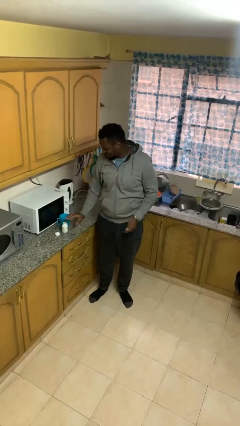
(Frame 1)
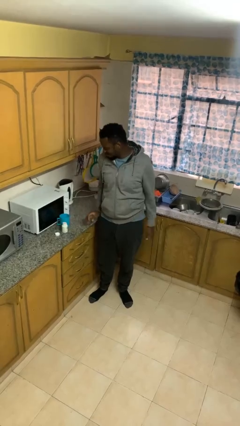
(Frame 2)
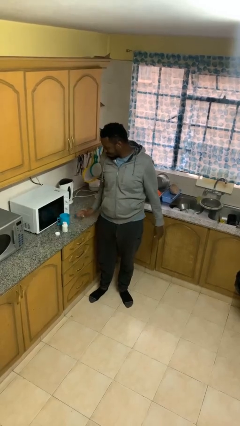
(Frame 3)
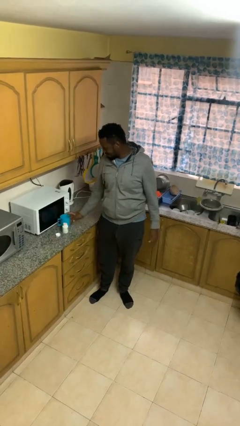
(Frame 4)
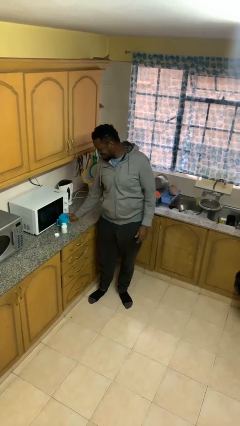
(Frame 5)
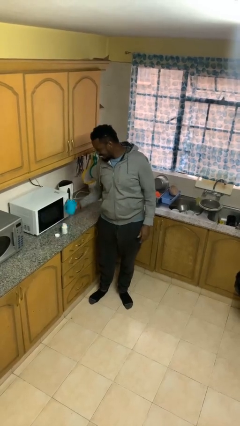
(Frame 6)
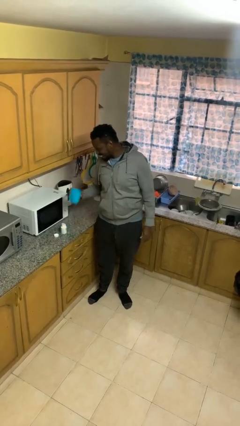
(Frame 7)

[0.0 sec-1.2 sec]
person drinks from cup

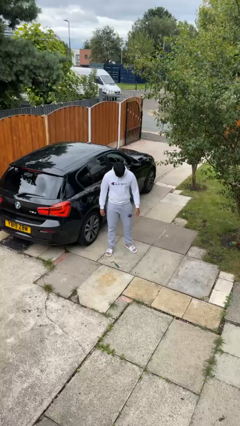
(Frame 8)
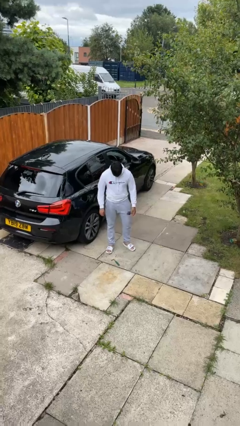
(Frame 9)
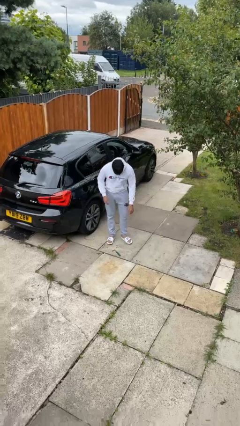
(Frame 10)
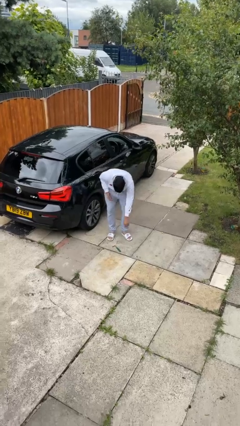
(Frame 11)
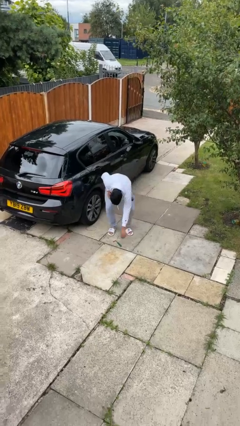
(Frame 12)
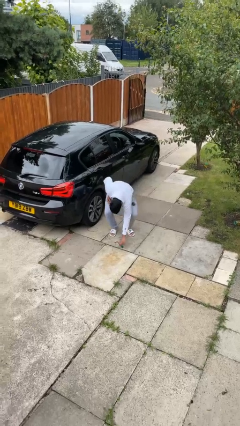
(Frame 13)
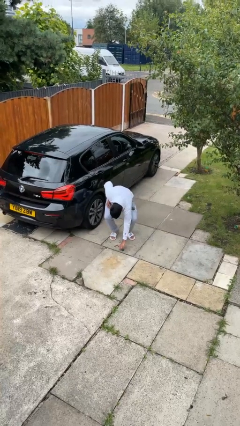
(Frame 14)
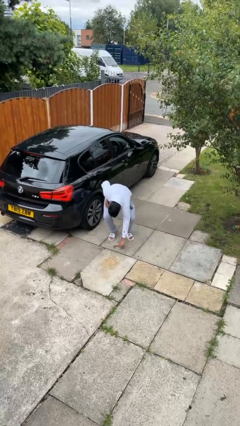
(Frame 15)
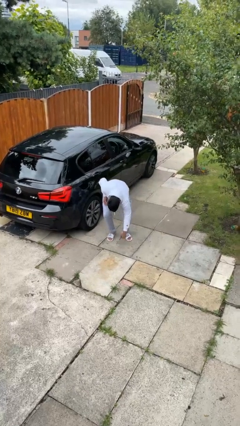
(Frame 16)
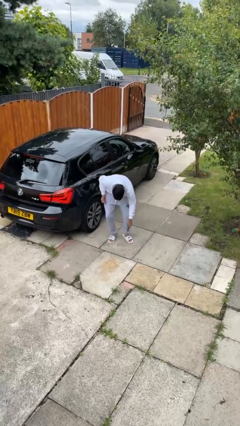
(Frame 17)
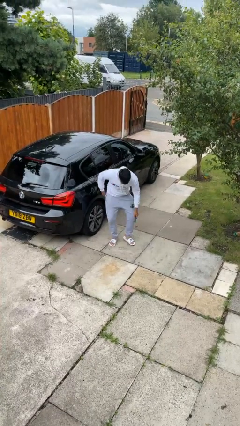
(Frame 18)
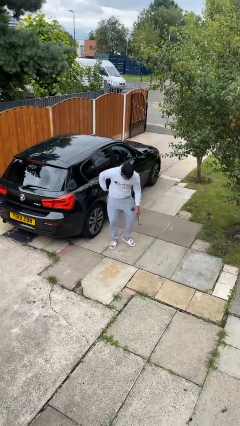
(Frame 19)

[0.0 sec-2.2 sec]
person picks up object from floor

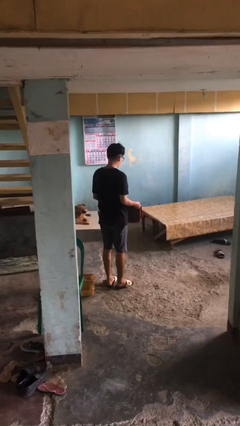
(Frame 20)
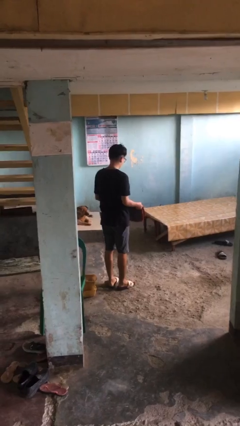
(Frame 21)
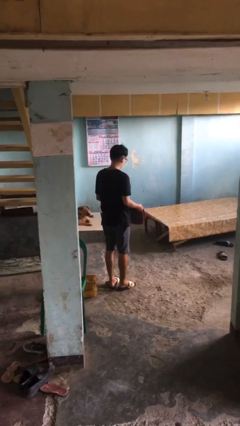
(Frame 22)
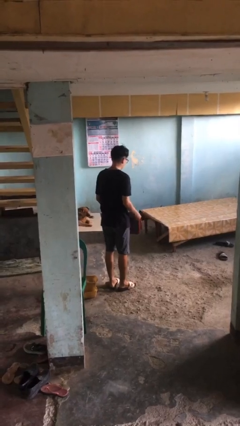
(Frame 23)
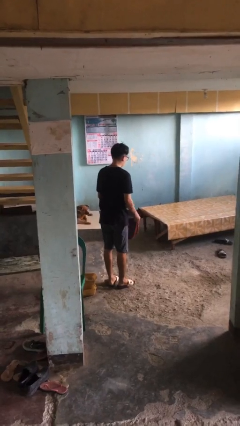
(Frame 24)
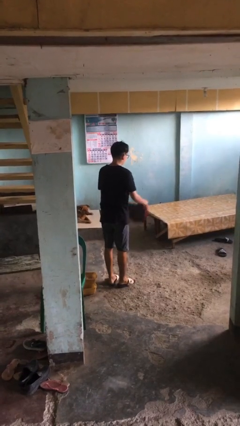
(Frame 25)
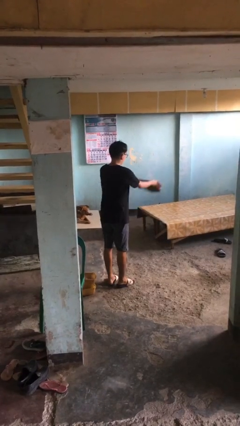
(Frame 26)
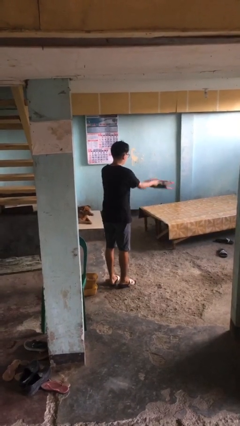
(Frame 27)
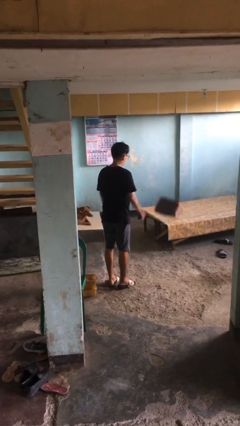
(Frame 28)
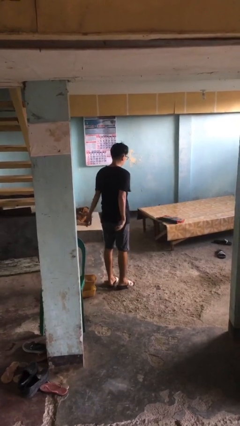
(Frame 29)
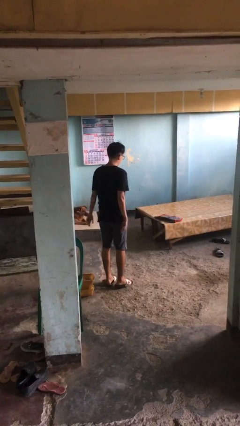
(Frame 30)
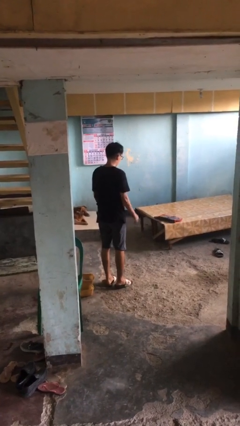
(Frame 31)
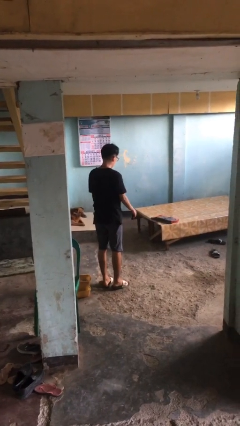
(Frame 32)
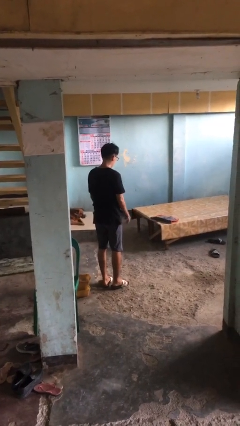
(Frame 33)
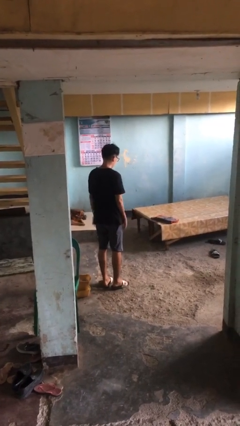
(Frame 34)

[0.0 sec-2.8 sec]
person throws object on bed

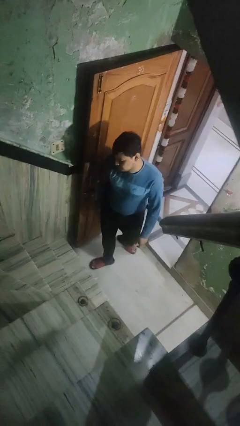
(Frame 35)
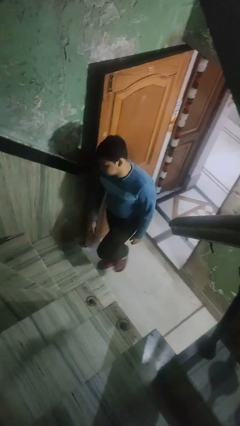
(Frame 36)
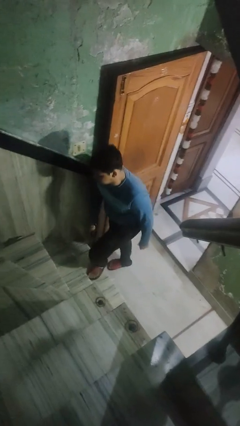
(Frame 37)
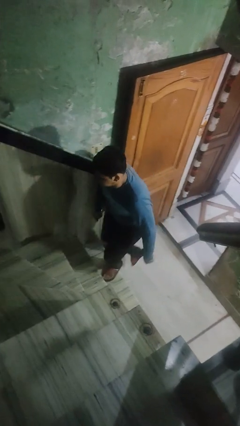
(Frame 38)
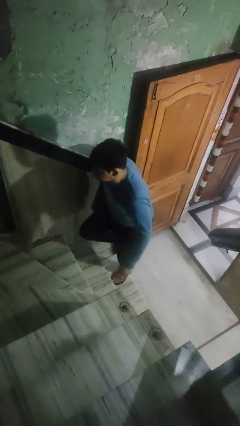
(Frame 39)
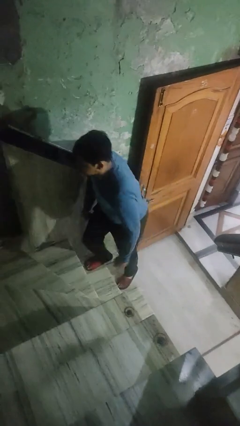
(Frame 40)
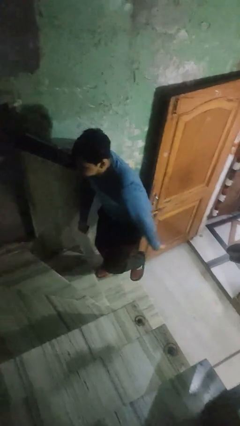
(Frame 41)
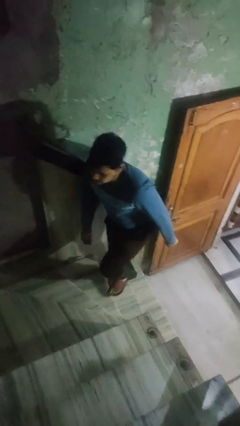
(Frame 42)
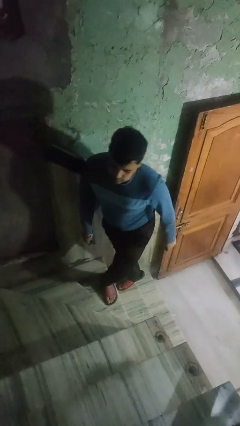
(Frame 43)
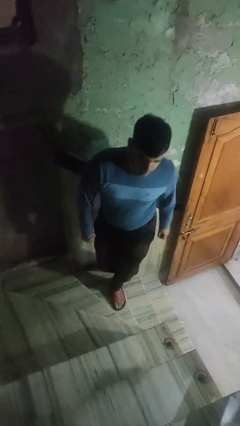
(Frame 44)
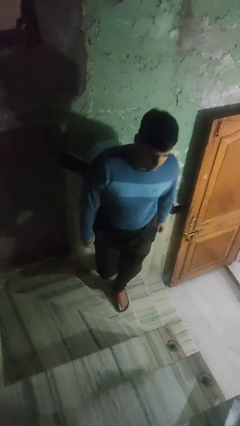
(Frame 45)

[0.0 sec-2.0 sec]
person climbs up stairs

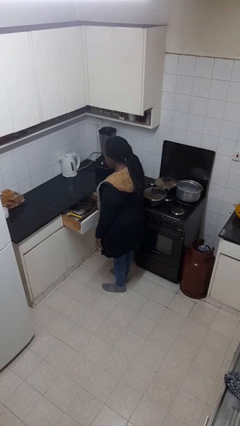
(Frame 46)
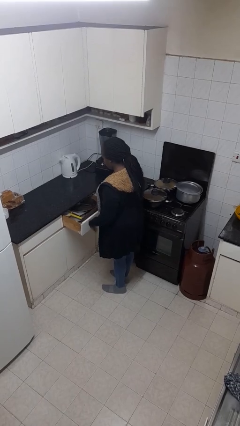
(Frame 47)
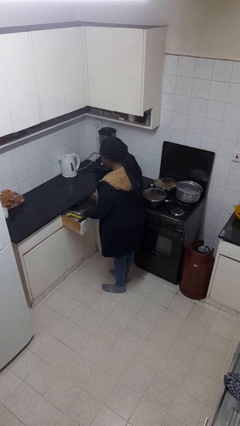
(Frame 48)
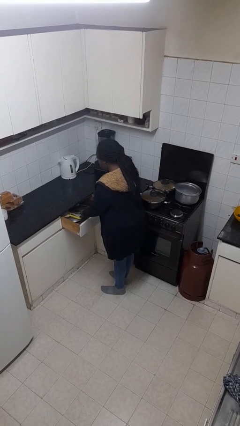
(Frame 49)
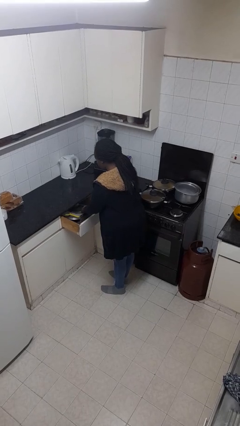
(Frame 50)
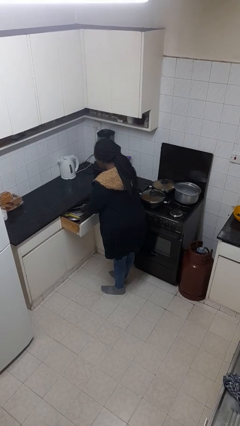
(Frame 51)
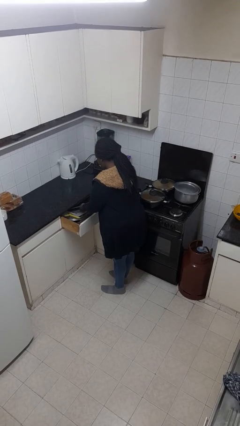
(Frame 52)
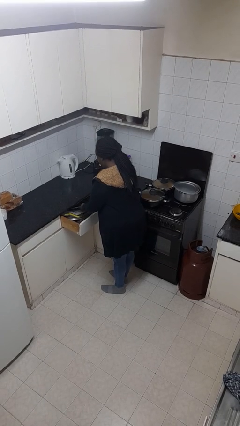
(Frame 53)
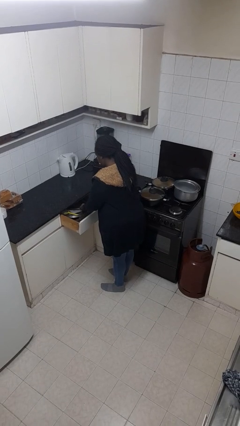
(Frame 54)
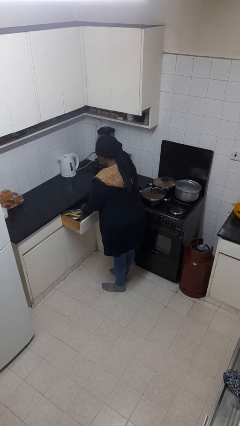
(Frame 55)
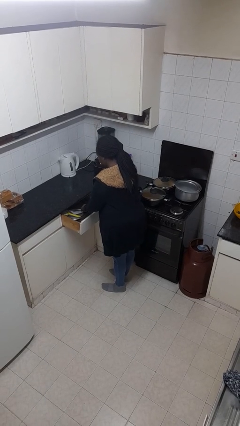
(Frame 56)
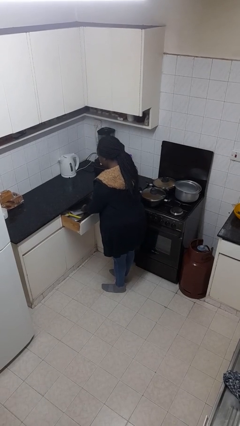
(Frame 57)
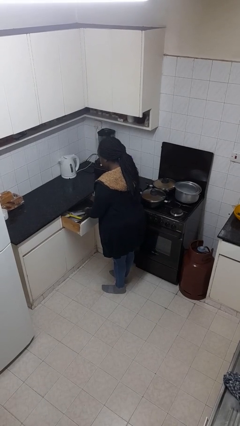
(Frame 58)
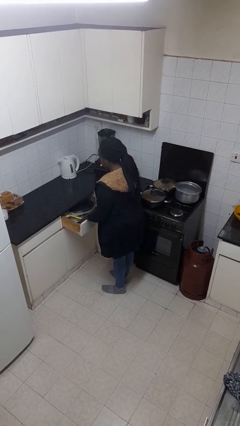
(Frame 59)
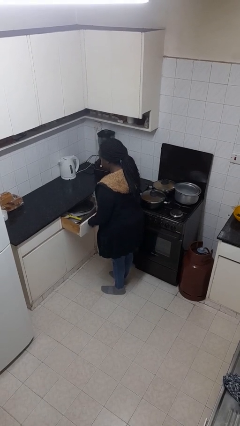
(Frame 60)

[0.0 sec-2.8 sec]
person searches in kitchen drawer

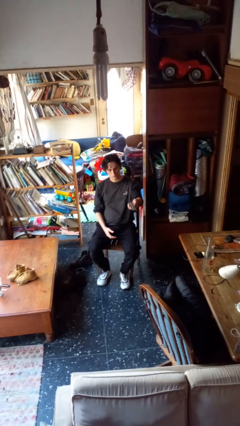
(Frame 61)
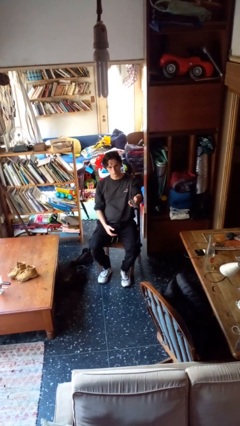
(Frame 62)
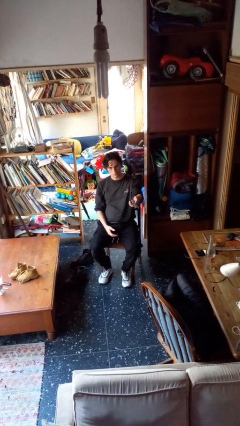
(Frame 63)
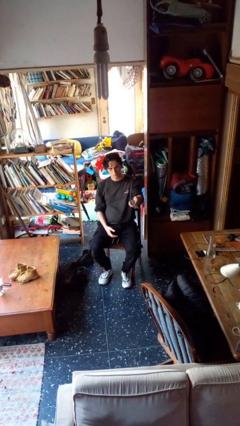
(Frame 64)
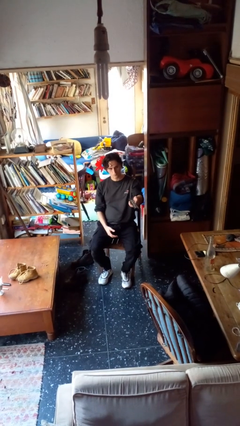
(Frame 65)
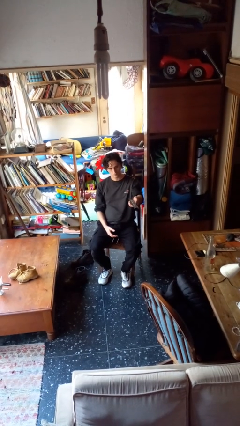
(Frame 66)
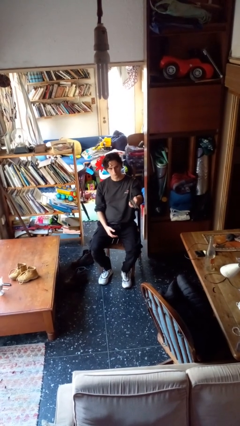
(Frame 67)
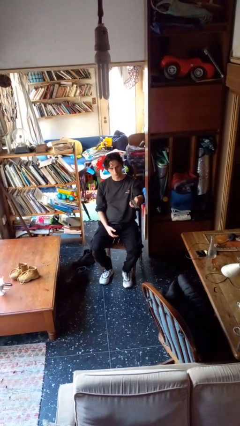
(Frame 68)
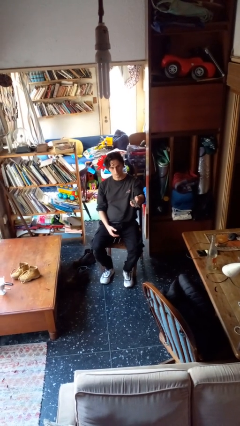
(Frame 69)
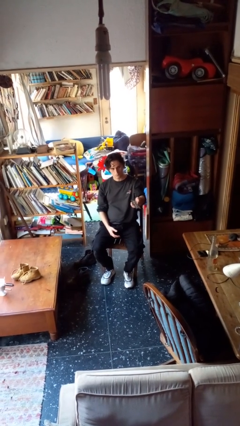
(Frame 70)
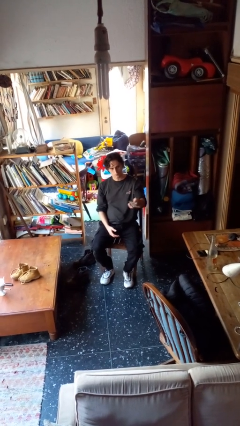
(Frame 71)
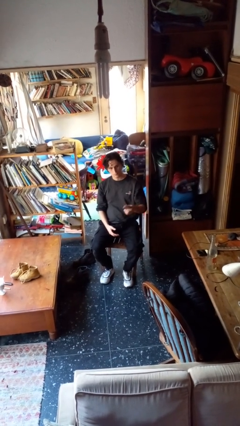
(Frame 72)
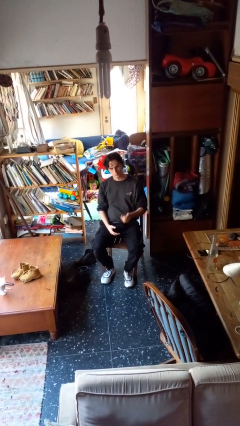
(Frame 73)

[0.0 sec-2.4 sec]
person uses television remote

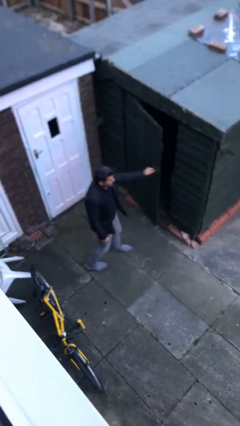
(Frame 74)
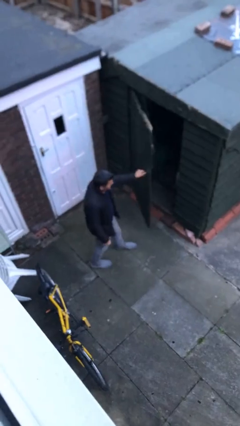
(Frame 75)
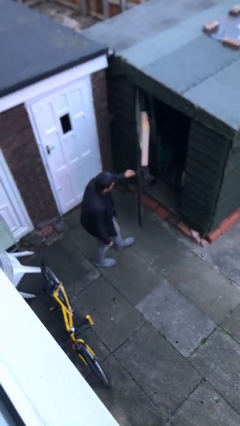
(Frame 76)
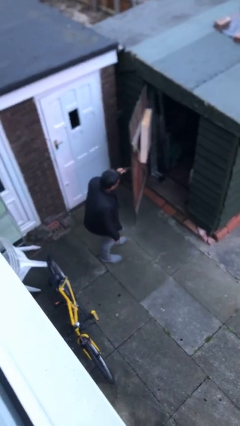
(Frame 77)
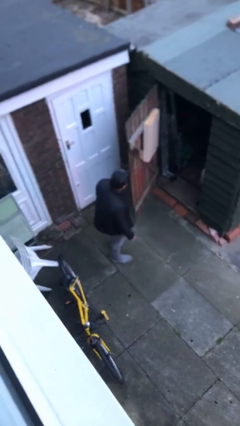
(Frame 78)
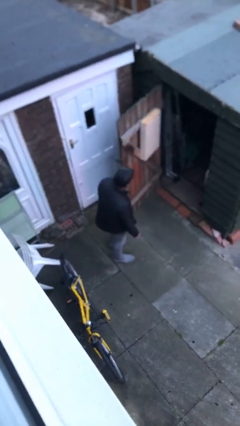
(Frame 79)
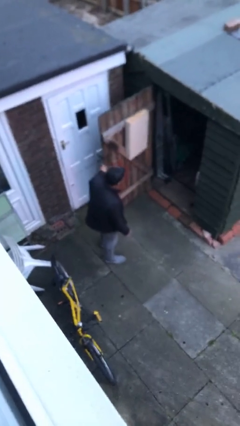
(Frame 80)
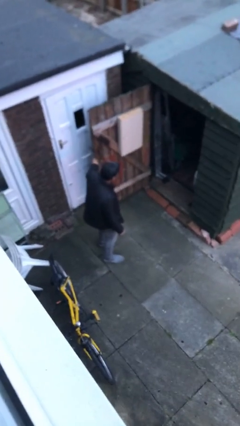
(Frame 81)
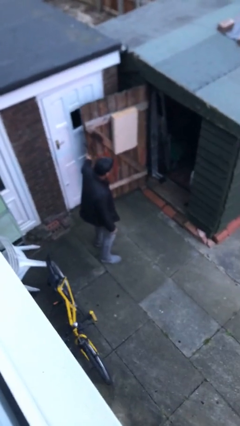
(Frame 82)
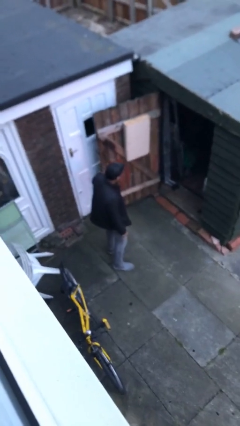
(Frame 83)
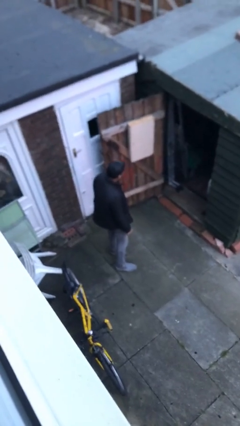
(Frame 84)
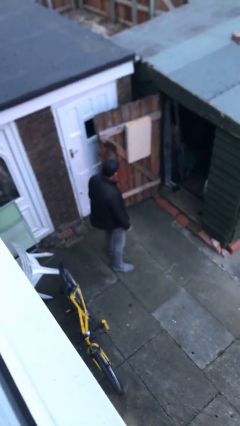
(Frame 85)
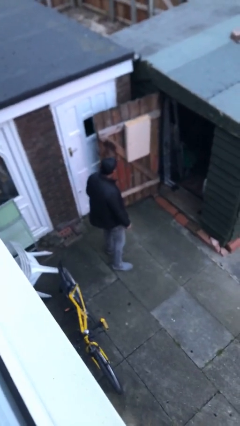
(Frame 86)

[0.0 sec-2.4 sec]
person opens facility door

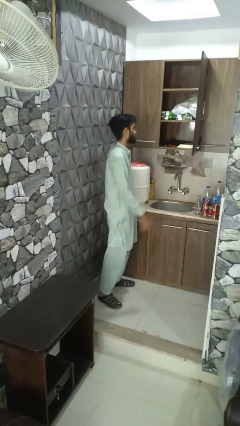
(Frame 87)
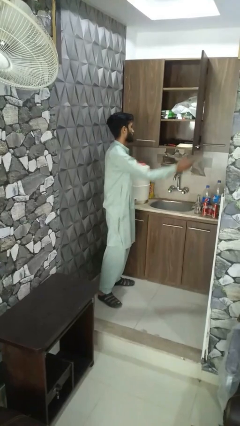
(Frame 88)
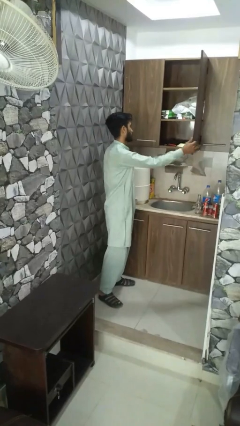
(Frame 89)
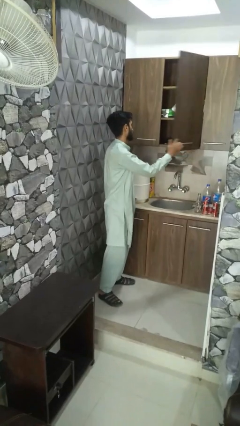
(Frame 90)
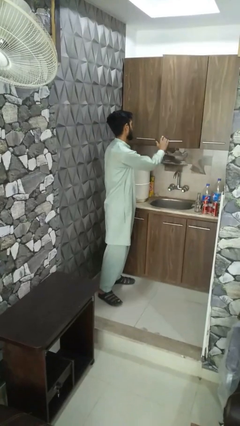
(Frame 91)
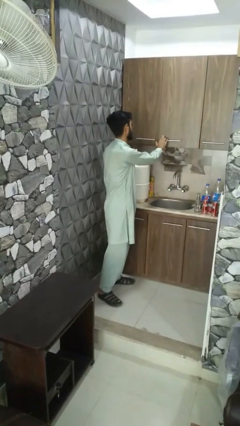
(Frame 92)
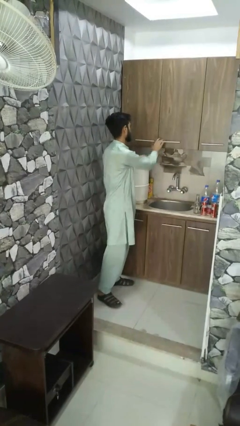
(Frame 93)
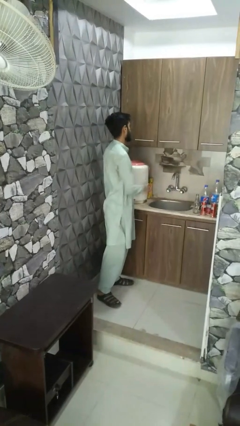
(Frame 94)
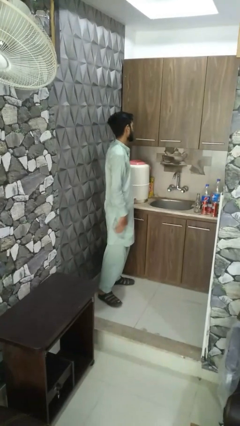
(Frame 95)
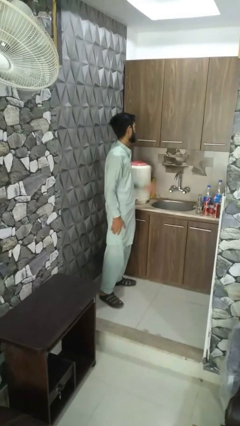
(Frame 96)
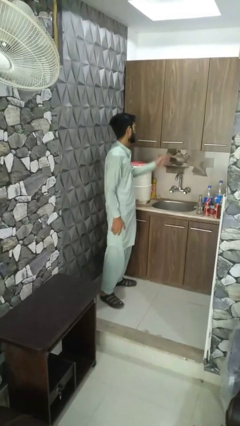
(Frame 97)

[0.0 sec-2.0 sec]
person closes cabinet
